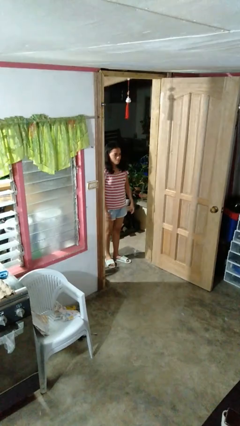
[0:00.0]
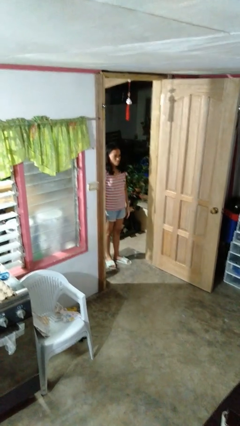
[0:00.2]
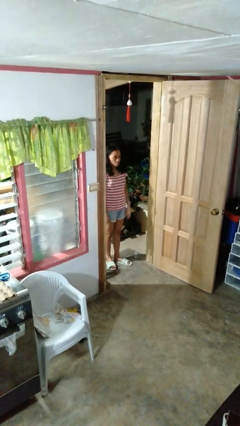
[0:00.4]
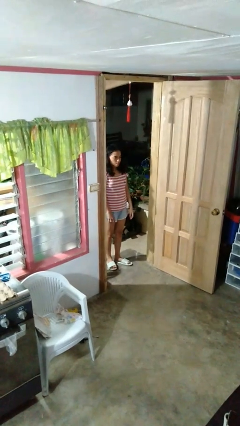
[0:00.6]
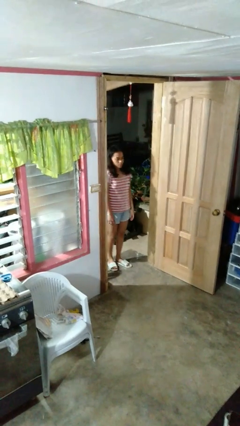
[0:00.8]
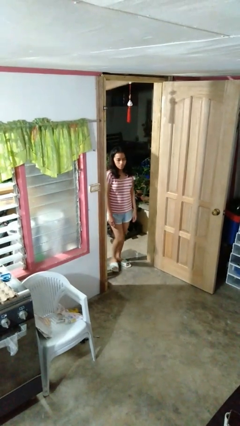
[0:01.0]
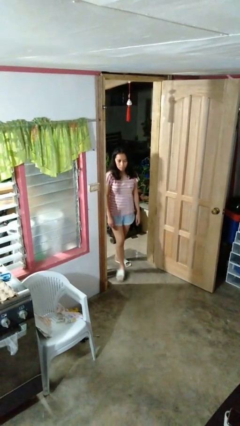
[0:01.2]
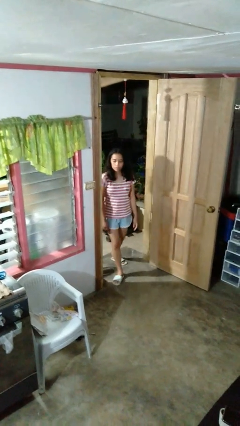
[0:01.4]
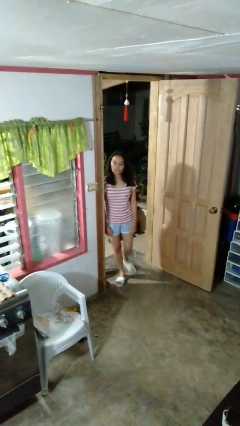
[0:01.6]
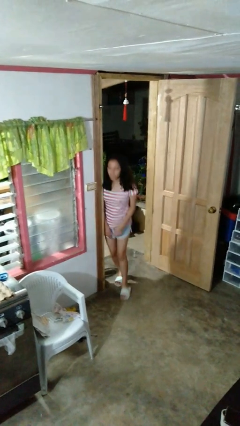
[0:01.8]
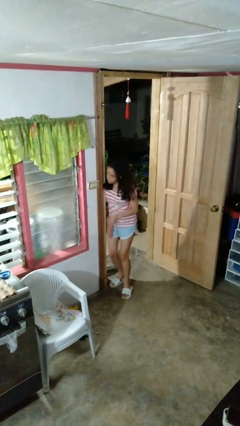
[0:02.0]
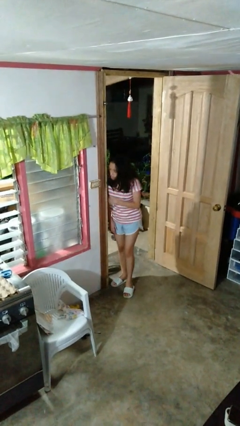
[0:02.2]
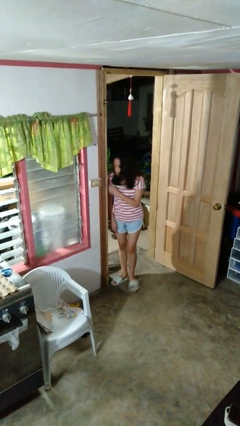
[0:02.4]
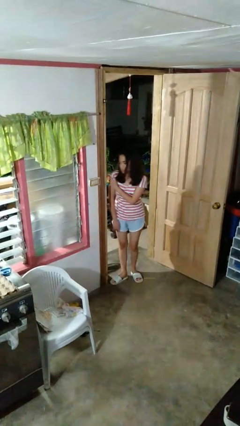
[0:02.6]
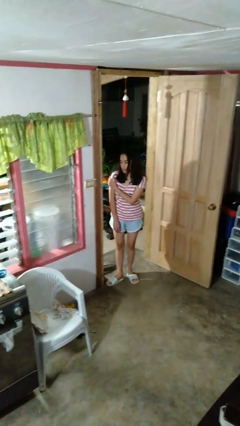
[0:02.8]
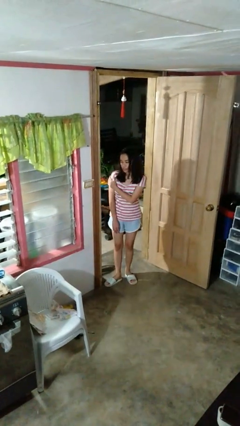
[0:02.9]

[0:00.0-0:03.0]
person bumps into wall

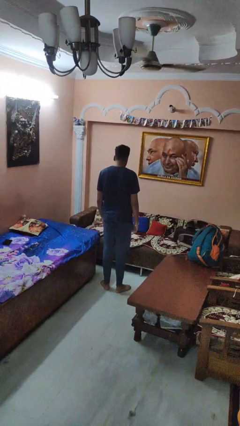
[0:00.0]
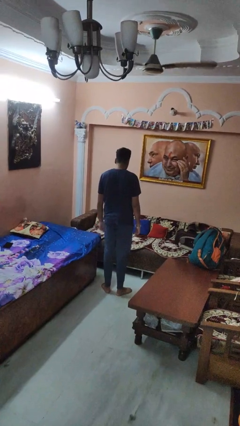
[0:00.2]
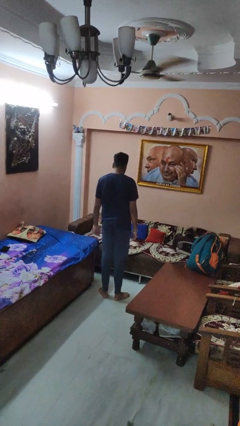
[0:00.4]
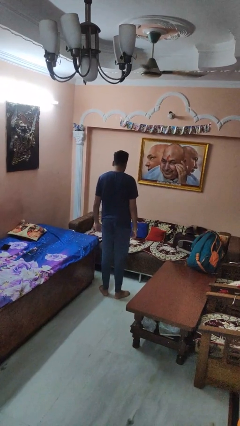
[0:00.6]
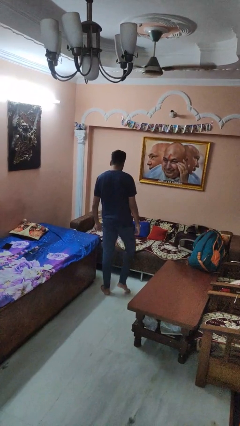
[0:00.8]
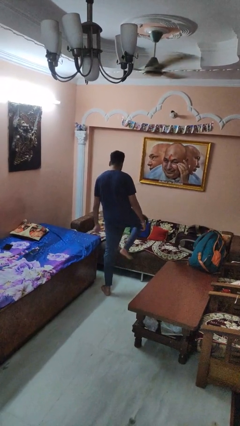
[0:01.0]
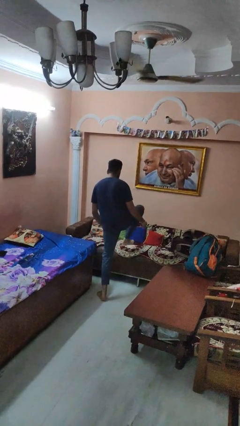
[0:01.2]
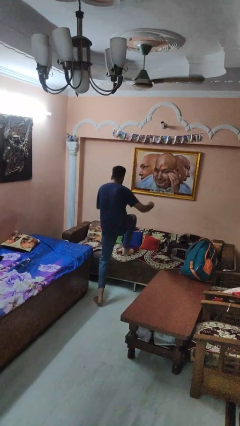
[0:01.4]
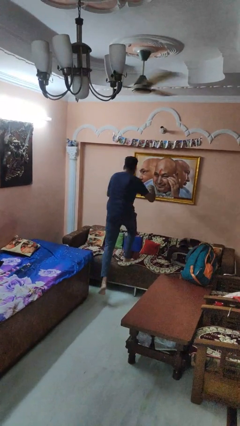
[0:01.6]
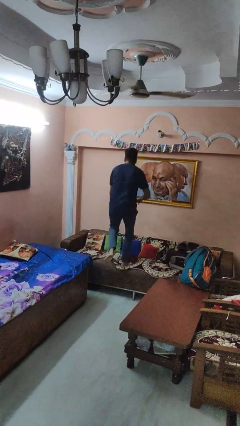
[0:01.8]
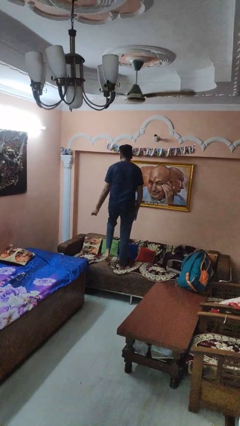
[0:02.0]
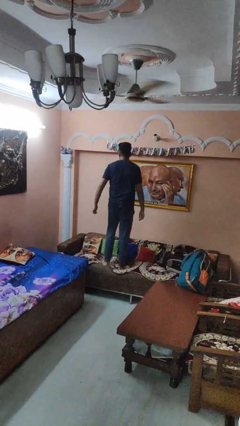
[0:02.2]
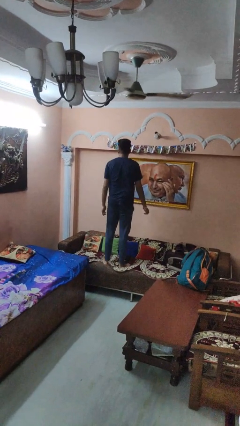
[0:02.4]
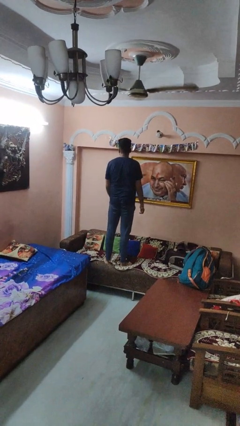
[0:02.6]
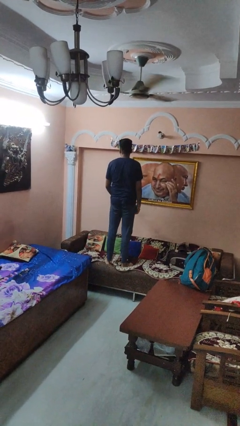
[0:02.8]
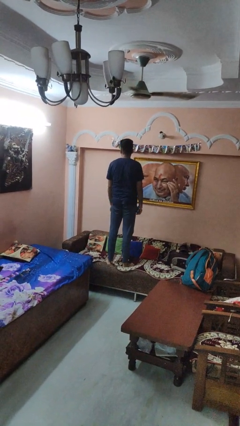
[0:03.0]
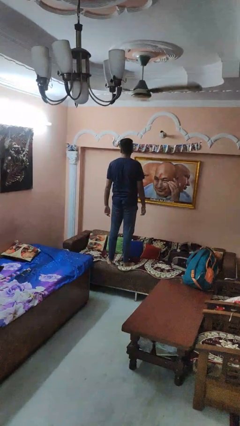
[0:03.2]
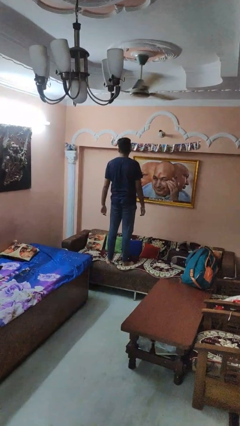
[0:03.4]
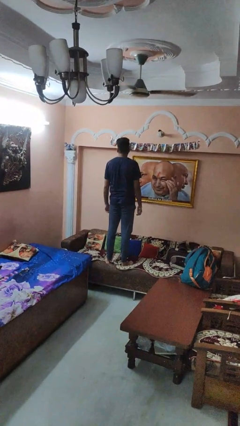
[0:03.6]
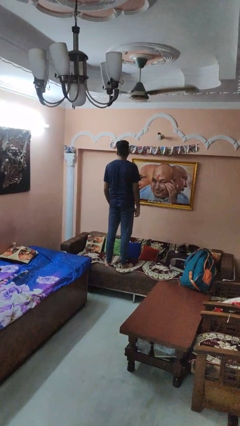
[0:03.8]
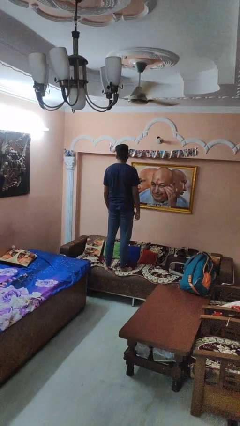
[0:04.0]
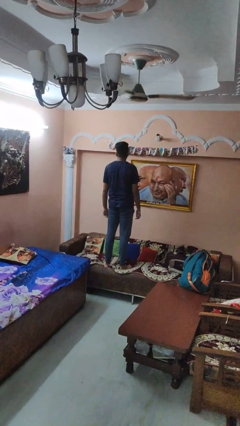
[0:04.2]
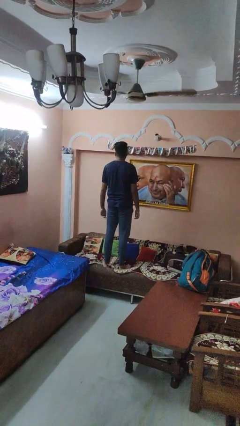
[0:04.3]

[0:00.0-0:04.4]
person climbs on couch

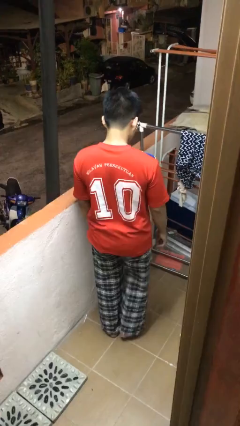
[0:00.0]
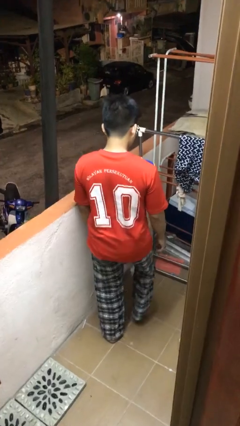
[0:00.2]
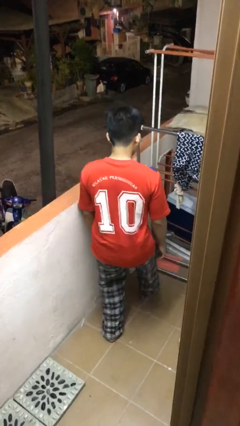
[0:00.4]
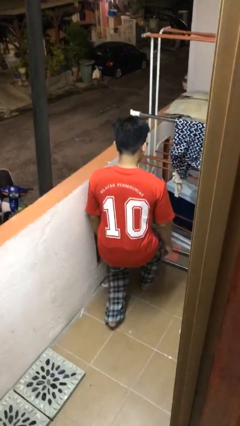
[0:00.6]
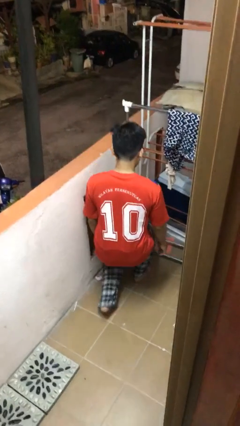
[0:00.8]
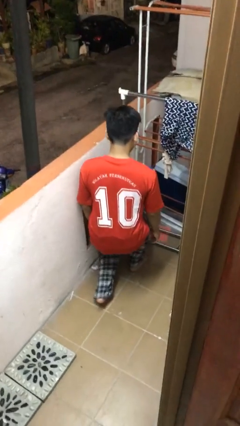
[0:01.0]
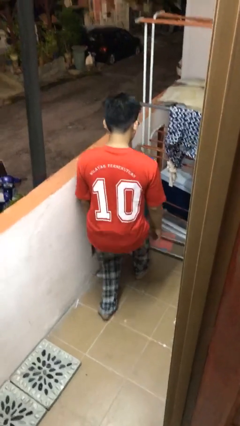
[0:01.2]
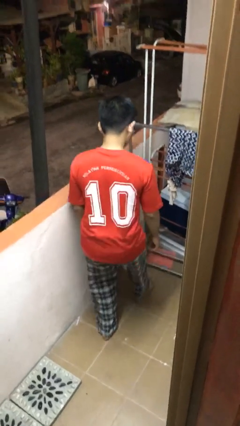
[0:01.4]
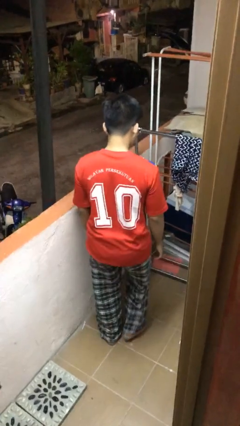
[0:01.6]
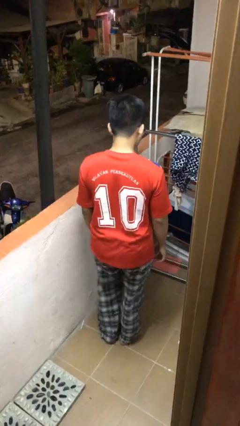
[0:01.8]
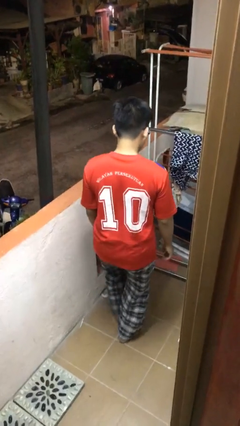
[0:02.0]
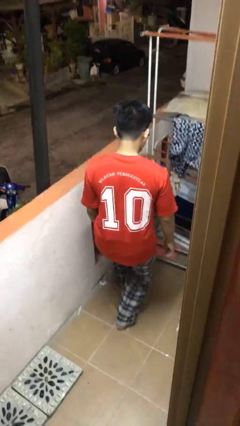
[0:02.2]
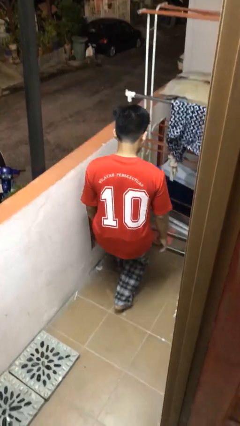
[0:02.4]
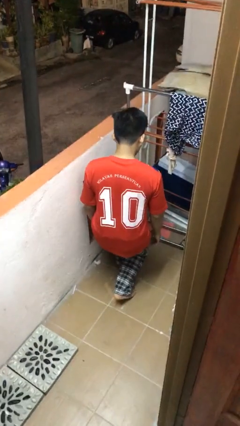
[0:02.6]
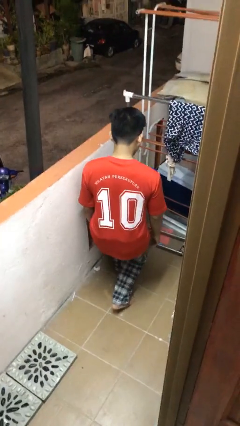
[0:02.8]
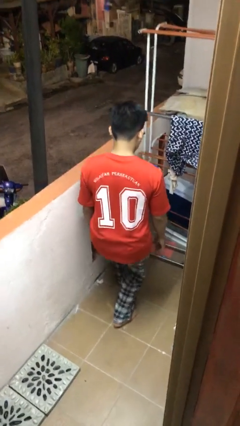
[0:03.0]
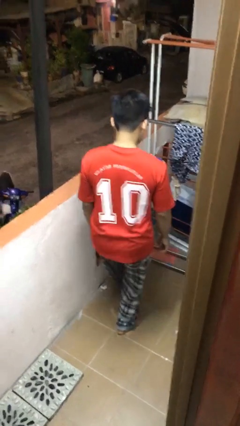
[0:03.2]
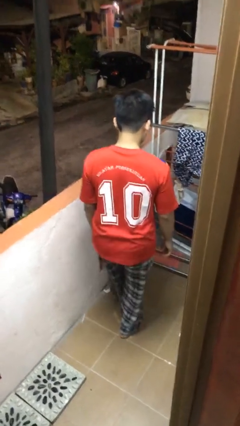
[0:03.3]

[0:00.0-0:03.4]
person exercises with lunges

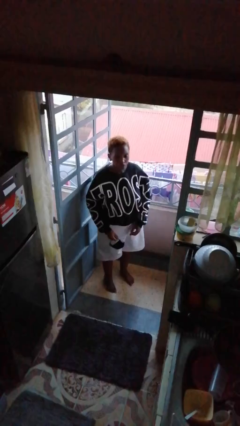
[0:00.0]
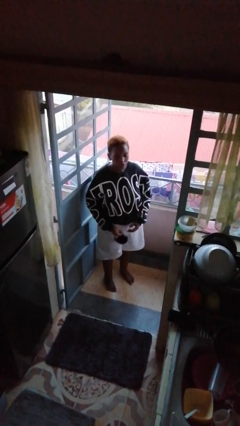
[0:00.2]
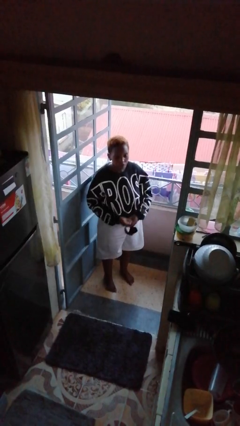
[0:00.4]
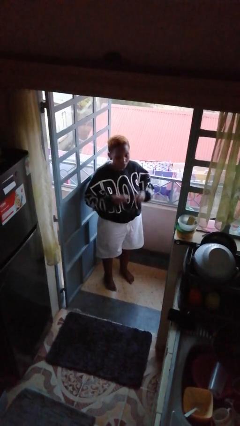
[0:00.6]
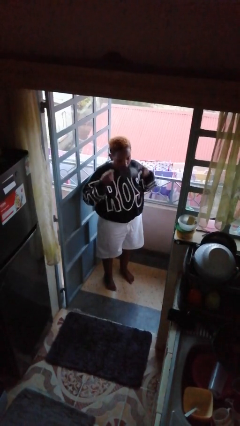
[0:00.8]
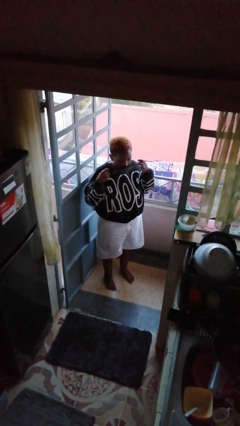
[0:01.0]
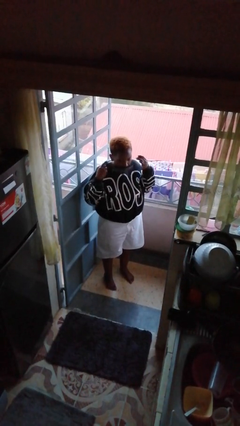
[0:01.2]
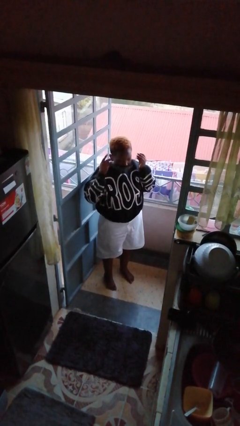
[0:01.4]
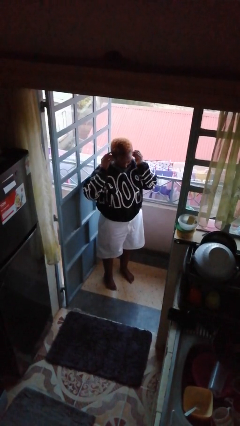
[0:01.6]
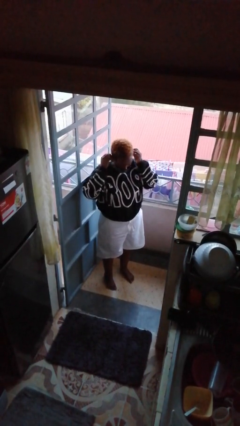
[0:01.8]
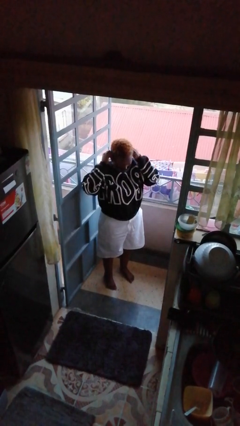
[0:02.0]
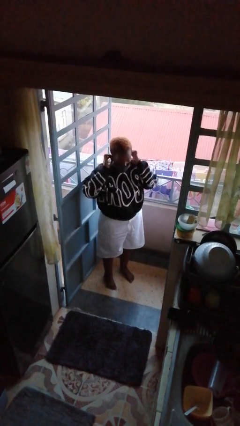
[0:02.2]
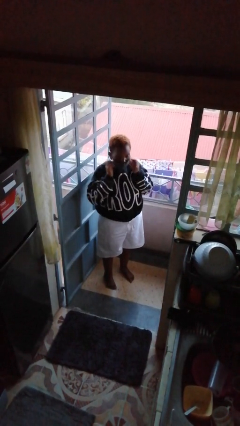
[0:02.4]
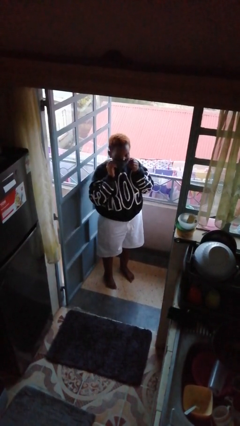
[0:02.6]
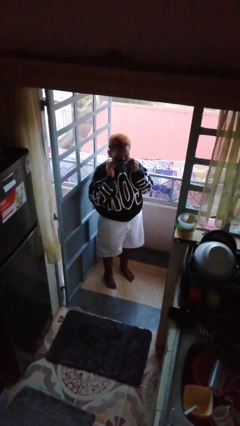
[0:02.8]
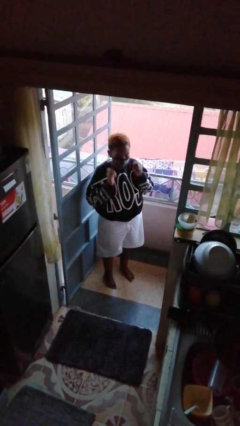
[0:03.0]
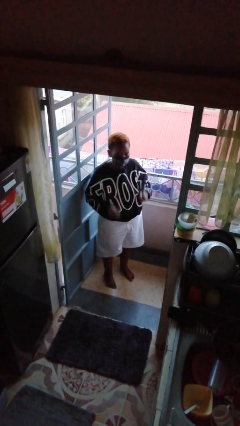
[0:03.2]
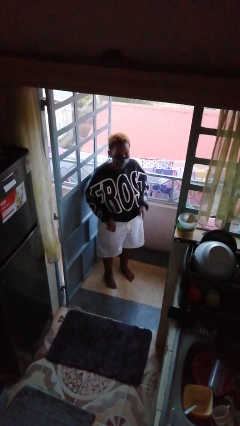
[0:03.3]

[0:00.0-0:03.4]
person puts on facemask

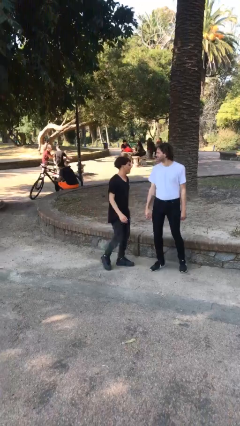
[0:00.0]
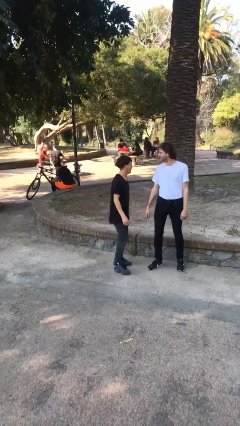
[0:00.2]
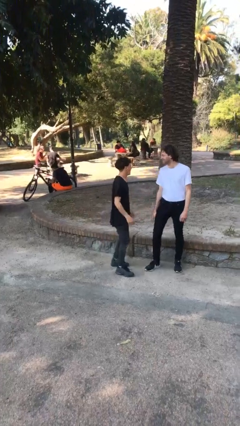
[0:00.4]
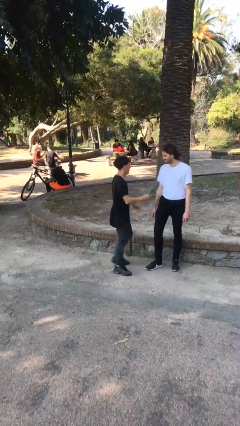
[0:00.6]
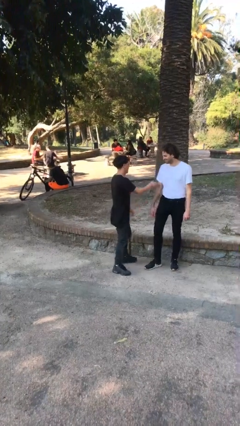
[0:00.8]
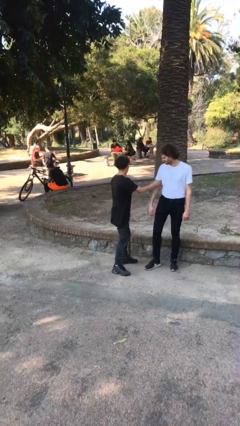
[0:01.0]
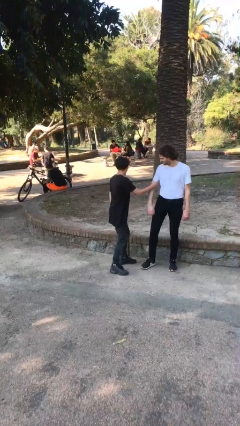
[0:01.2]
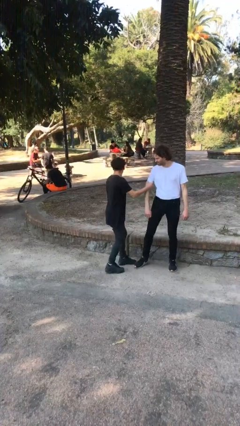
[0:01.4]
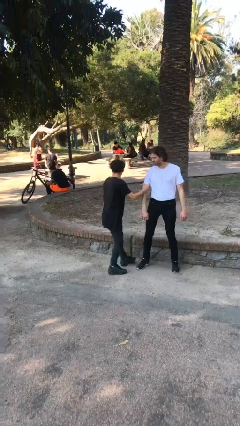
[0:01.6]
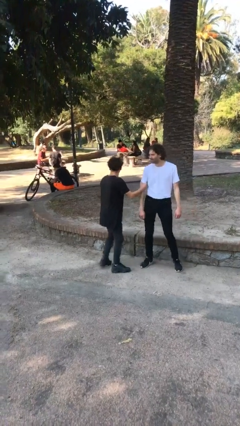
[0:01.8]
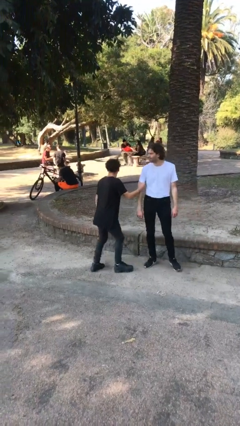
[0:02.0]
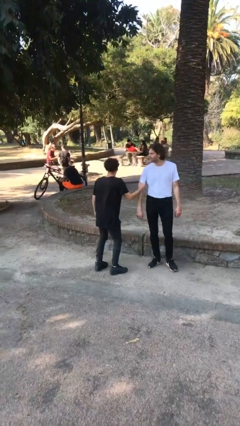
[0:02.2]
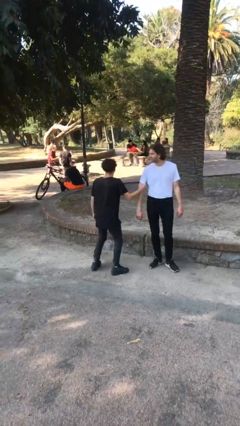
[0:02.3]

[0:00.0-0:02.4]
person grabs person by bicep

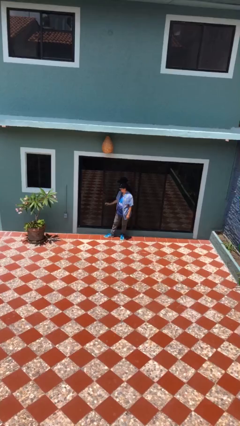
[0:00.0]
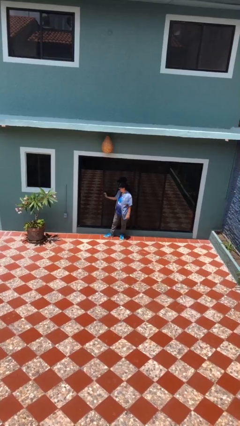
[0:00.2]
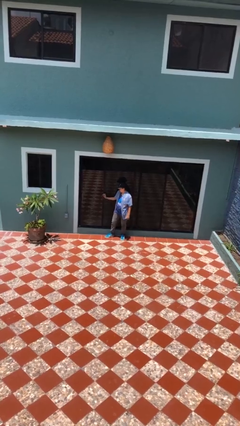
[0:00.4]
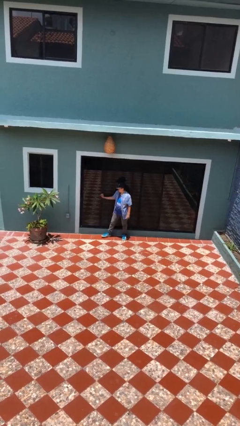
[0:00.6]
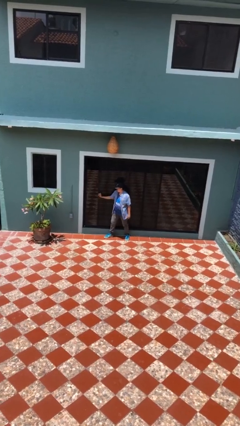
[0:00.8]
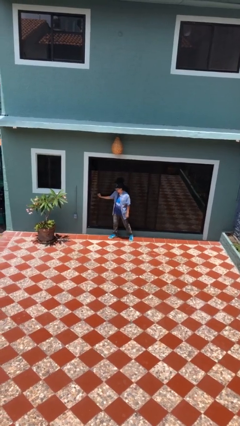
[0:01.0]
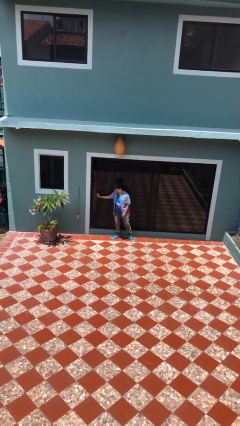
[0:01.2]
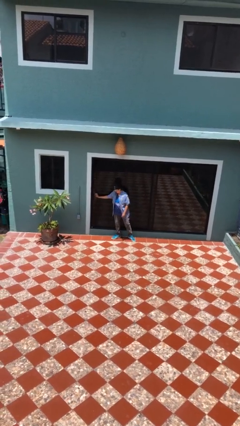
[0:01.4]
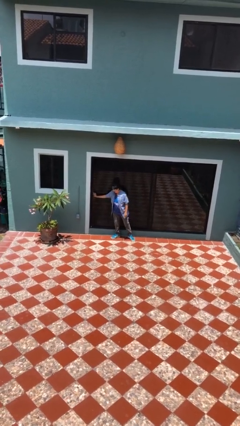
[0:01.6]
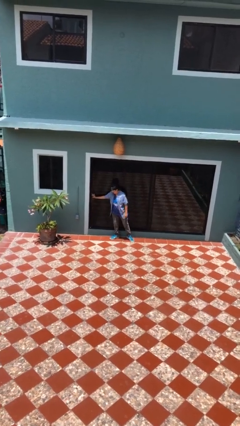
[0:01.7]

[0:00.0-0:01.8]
person closes sliding door
